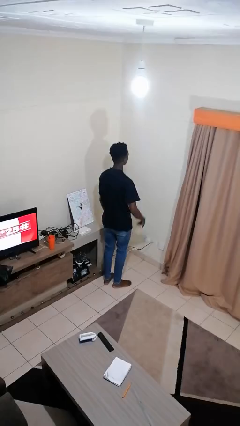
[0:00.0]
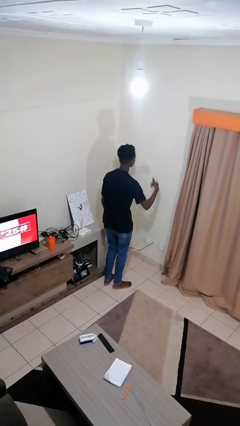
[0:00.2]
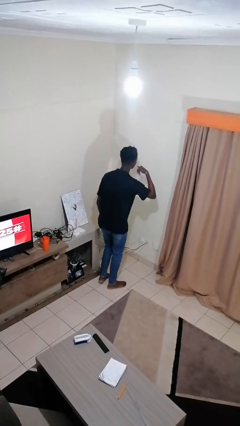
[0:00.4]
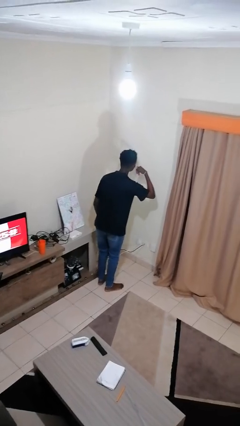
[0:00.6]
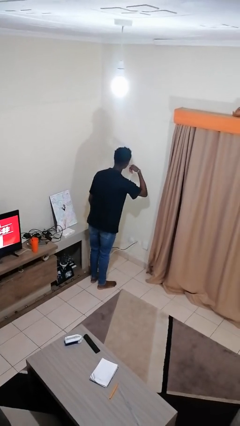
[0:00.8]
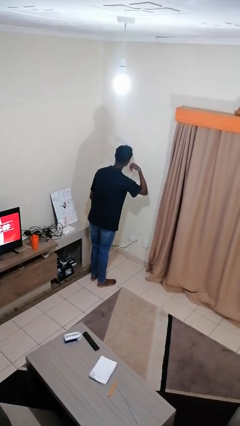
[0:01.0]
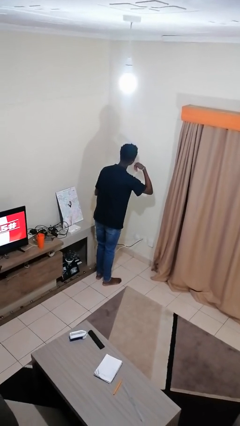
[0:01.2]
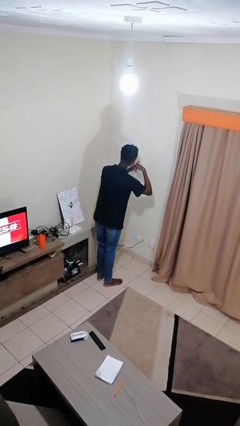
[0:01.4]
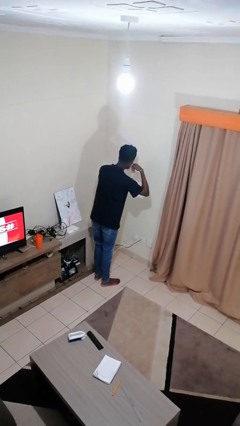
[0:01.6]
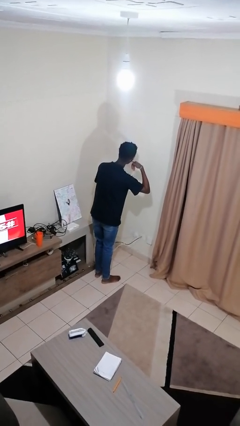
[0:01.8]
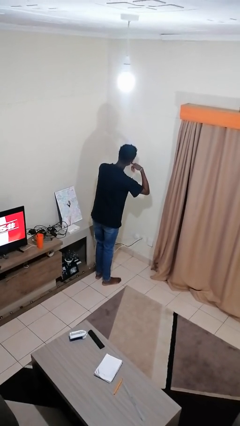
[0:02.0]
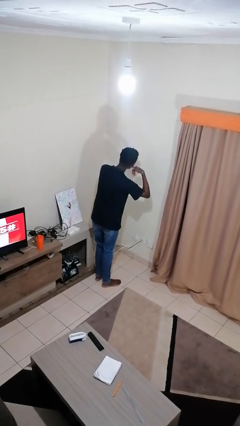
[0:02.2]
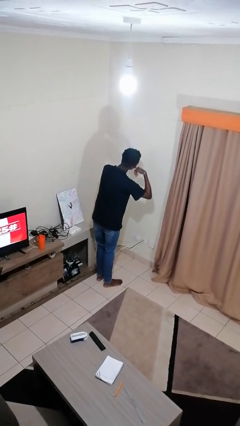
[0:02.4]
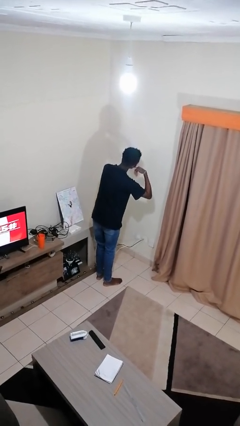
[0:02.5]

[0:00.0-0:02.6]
person gestures call me

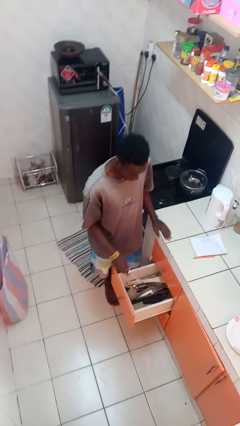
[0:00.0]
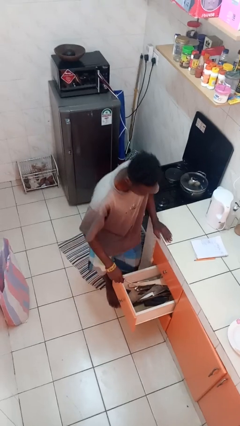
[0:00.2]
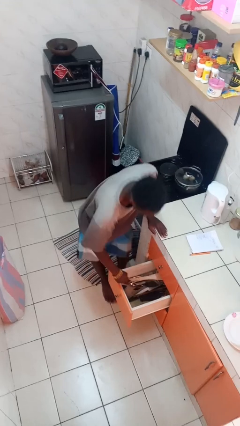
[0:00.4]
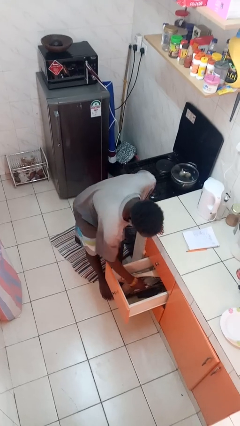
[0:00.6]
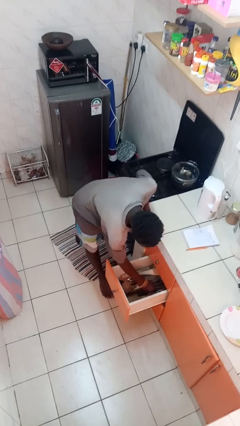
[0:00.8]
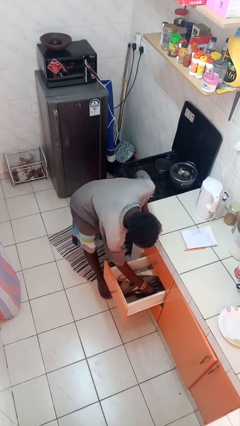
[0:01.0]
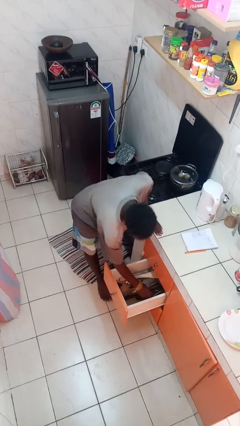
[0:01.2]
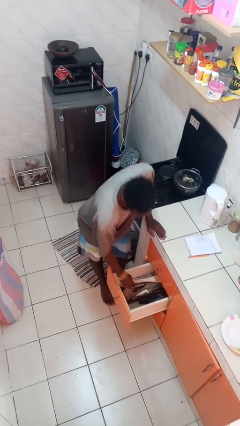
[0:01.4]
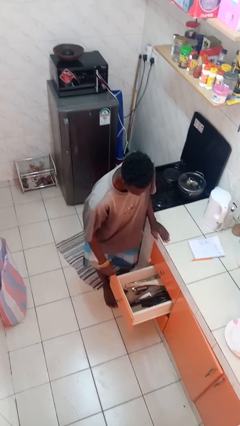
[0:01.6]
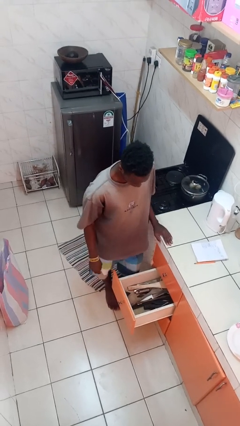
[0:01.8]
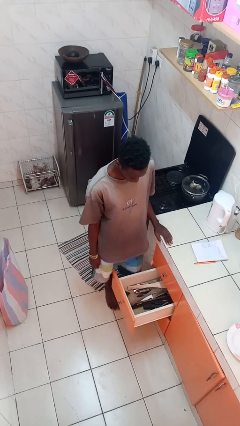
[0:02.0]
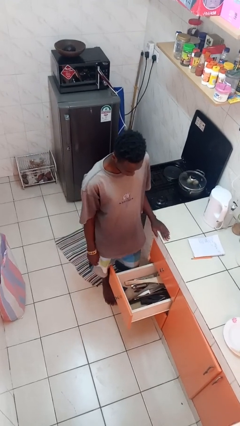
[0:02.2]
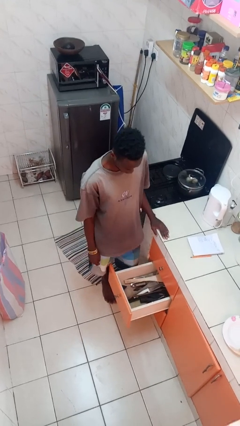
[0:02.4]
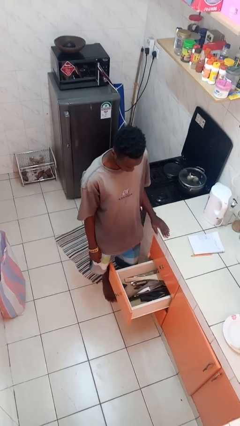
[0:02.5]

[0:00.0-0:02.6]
person puts object into kitchen drawer

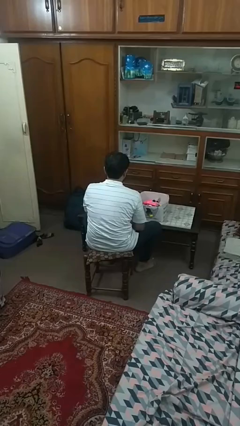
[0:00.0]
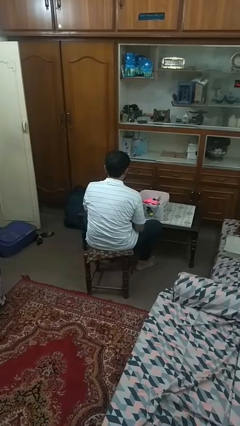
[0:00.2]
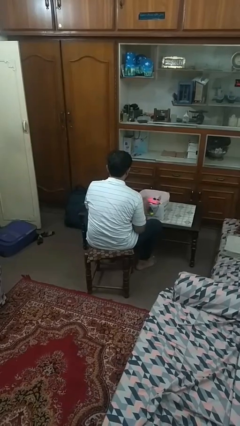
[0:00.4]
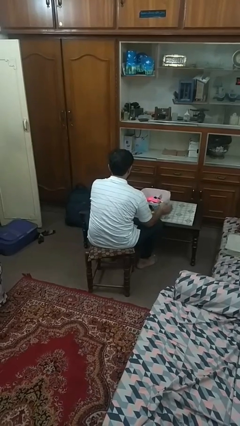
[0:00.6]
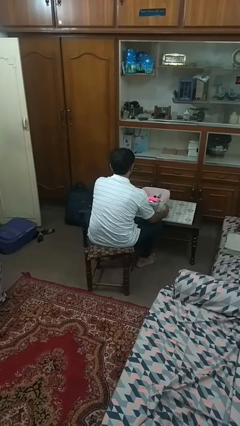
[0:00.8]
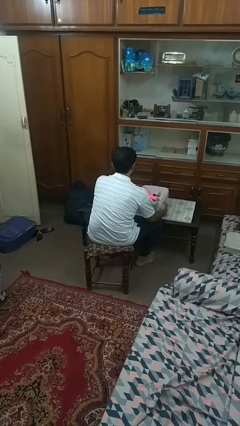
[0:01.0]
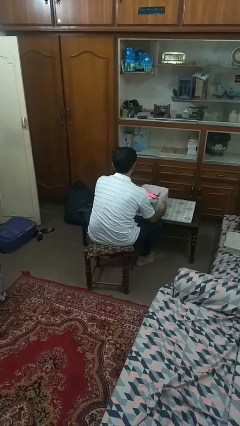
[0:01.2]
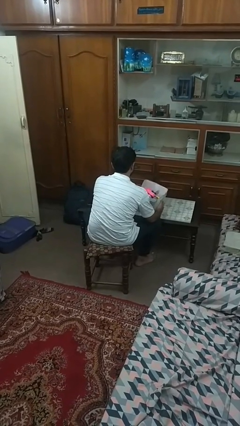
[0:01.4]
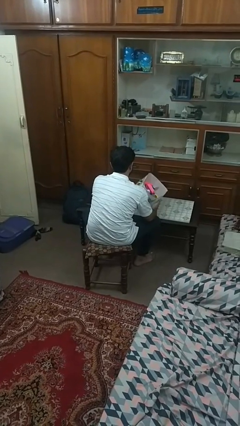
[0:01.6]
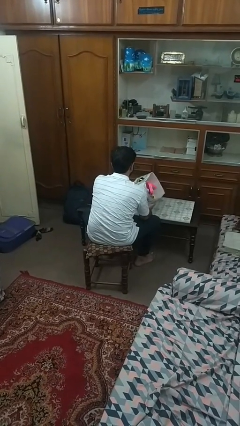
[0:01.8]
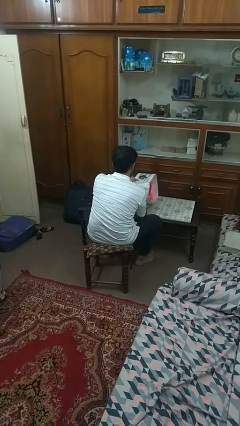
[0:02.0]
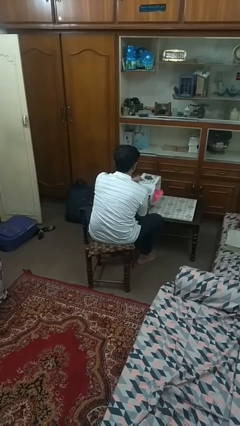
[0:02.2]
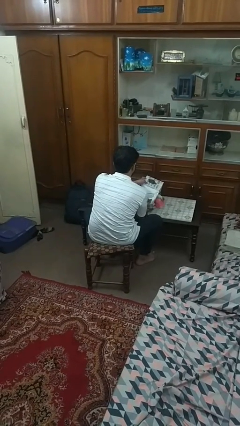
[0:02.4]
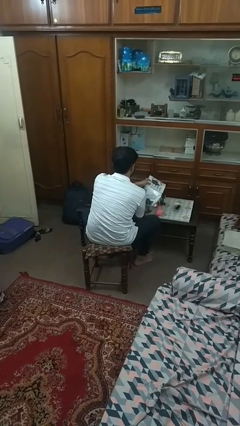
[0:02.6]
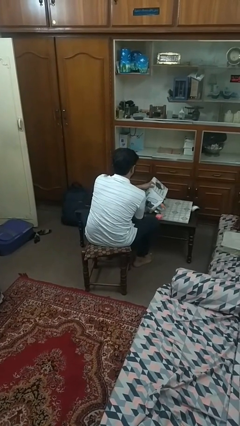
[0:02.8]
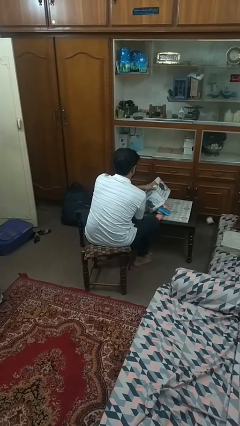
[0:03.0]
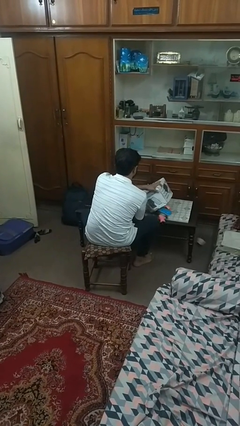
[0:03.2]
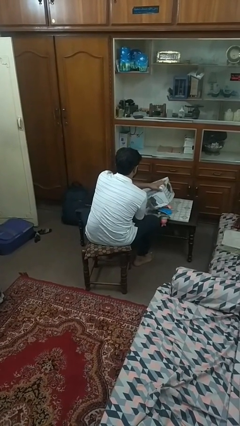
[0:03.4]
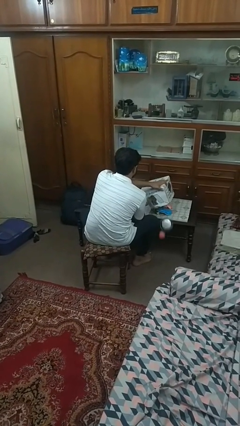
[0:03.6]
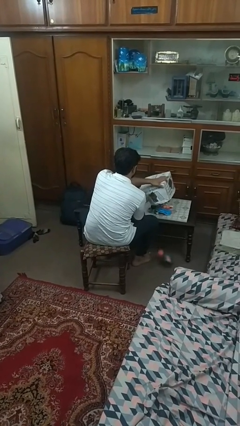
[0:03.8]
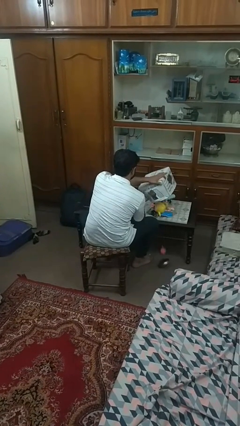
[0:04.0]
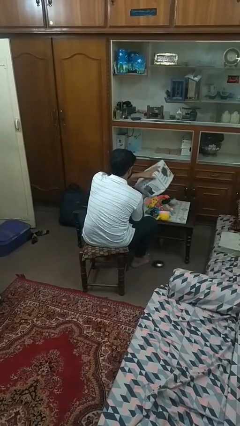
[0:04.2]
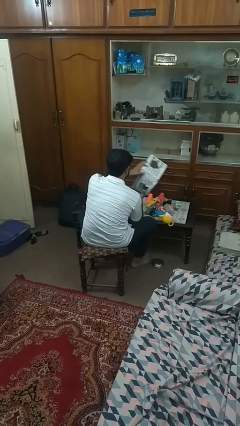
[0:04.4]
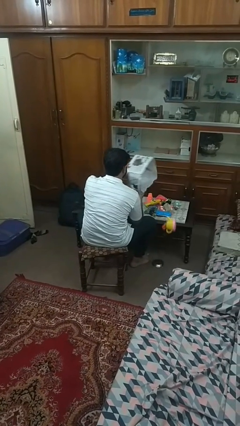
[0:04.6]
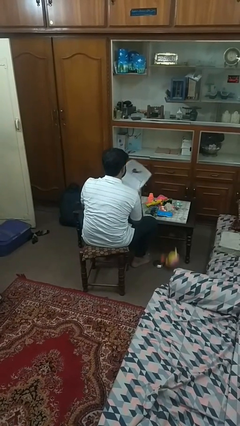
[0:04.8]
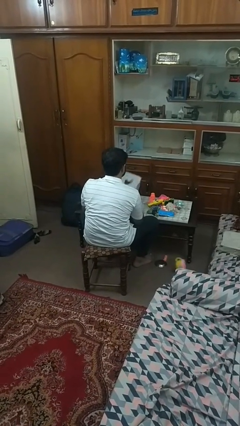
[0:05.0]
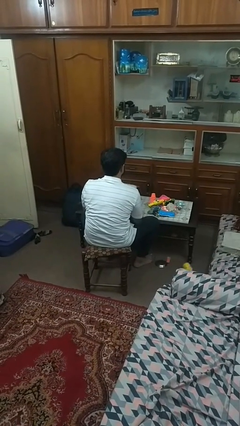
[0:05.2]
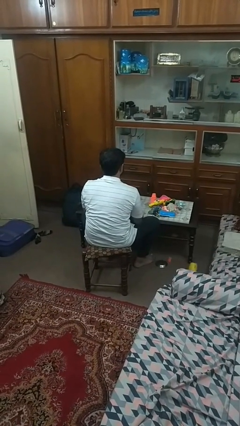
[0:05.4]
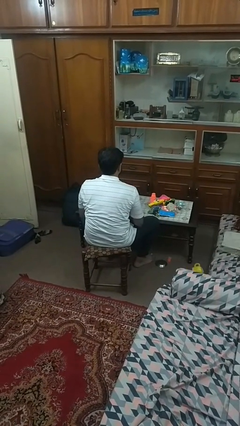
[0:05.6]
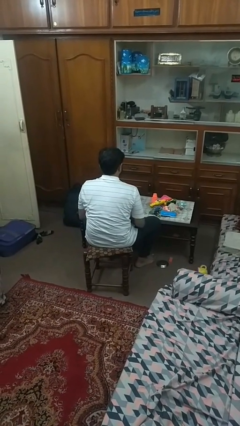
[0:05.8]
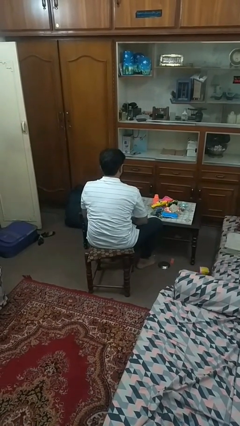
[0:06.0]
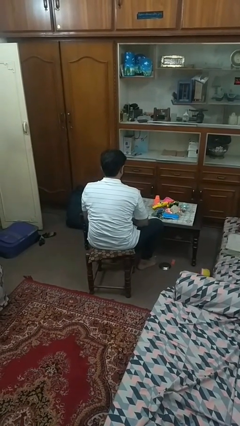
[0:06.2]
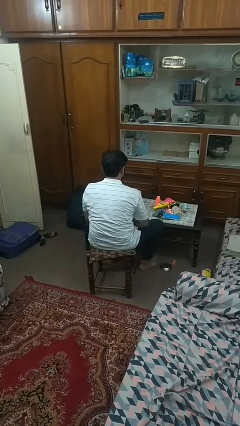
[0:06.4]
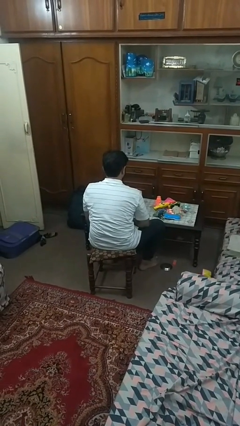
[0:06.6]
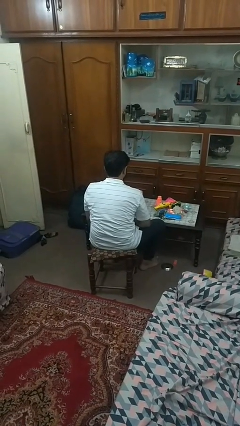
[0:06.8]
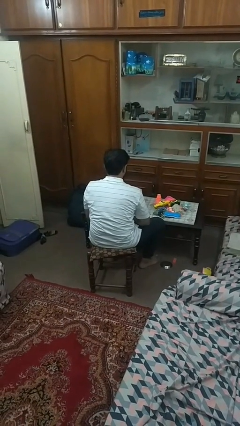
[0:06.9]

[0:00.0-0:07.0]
person unloads box onto table

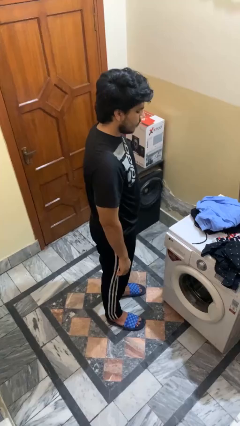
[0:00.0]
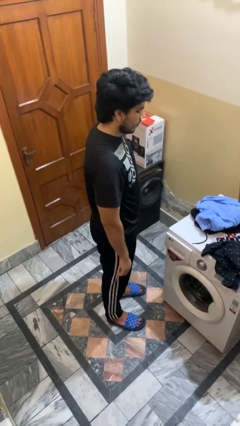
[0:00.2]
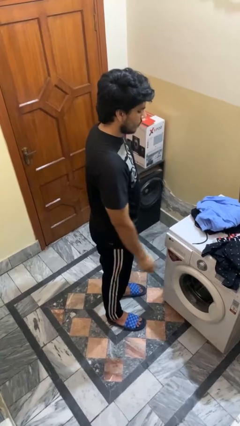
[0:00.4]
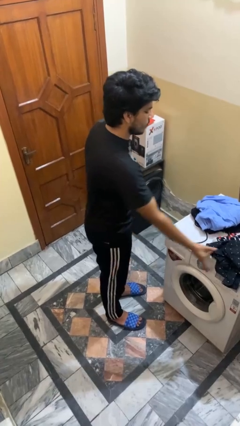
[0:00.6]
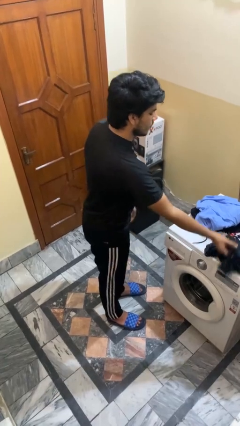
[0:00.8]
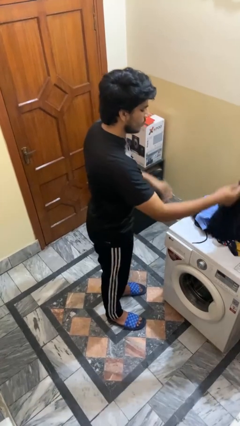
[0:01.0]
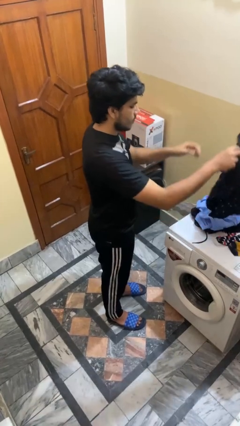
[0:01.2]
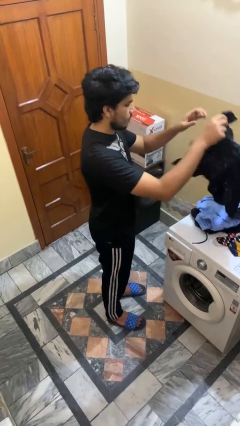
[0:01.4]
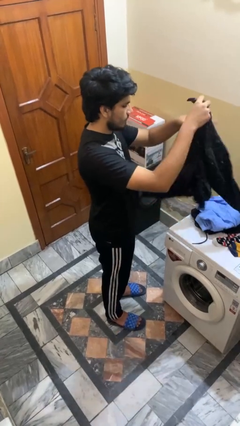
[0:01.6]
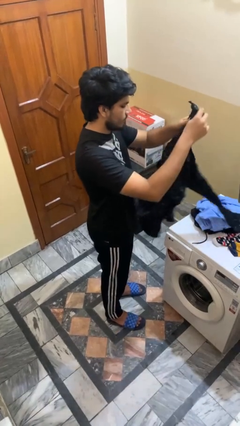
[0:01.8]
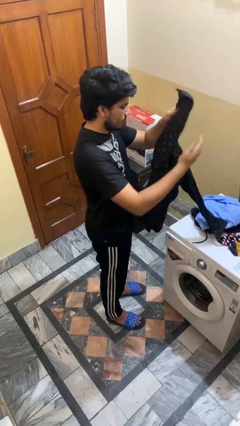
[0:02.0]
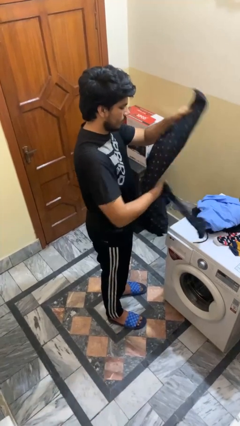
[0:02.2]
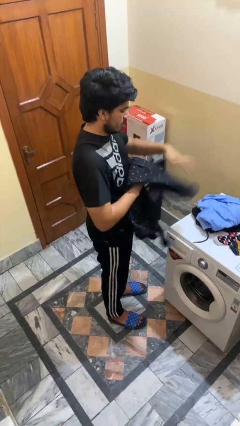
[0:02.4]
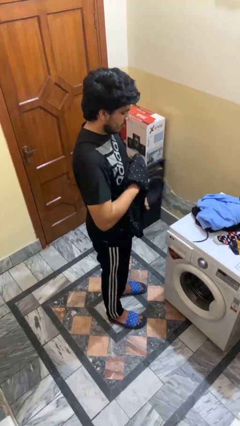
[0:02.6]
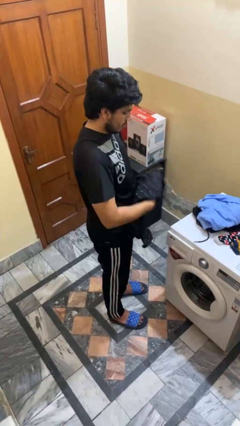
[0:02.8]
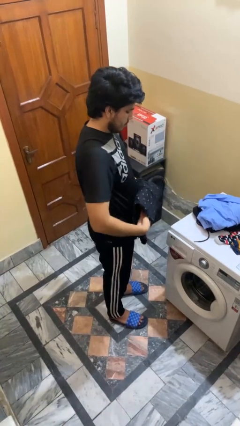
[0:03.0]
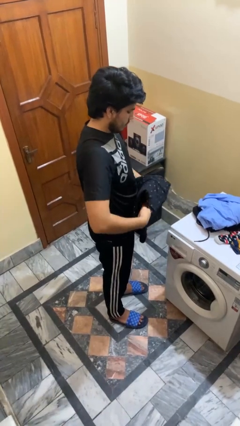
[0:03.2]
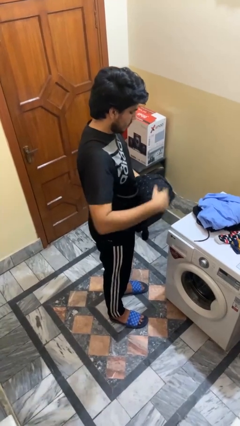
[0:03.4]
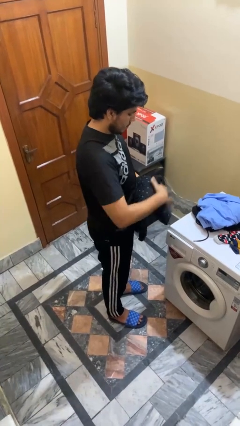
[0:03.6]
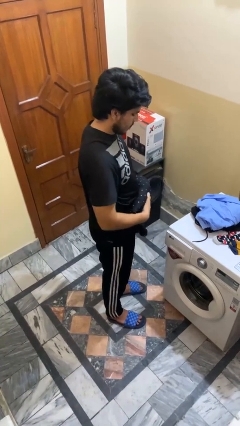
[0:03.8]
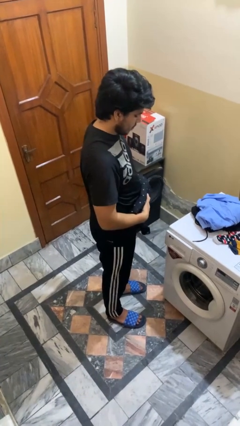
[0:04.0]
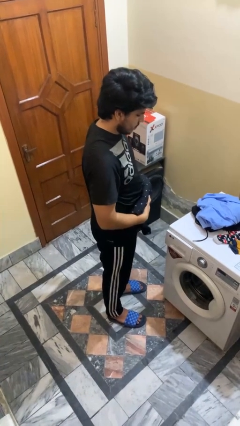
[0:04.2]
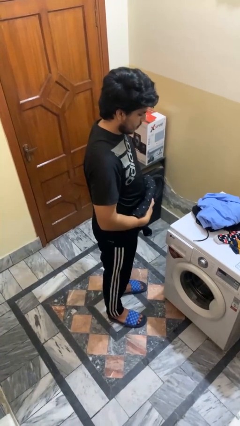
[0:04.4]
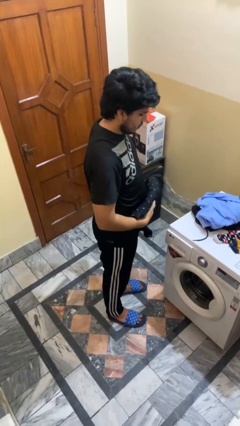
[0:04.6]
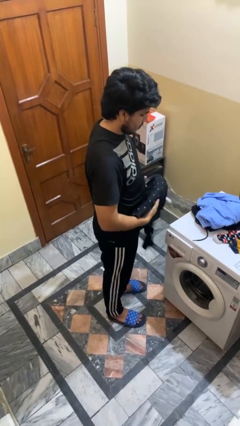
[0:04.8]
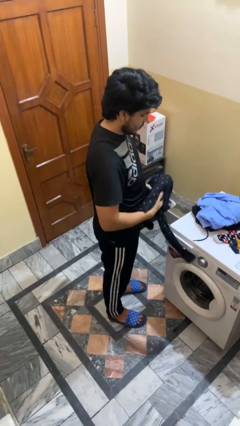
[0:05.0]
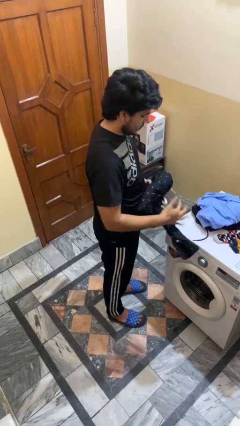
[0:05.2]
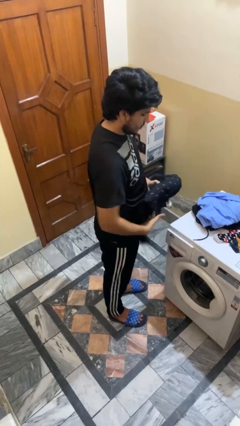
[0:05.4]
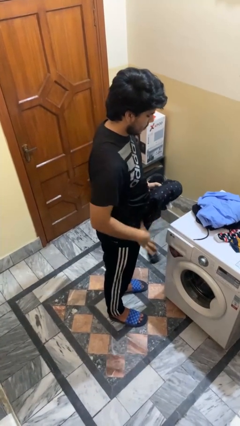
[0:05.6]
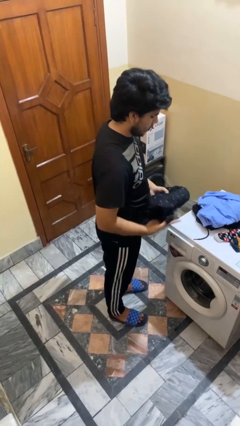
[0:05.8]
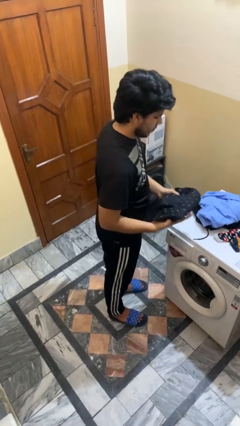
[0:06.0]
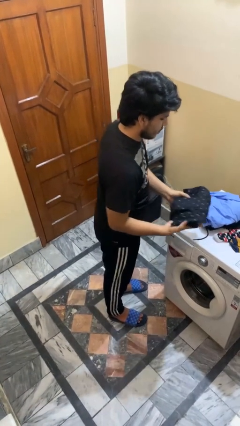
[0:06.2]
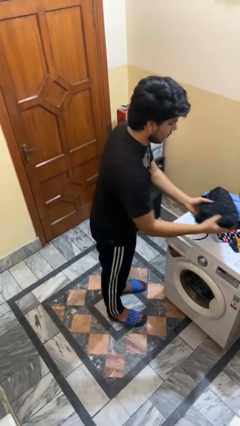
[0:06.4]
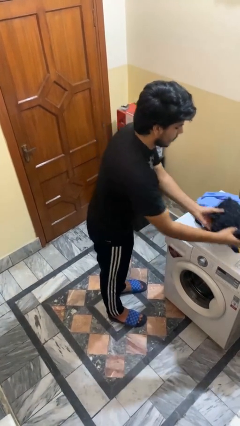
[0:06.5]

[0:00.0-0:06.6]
person folds shirt
